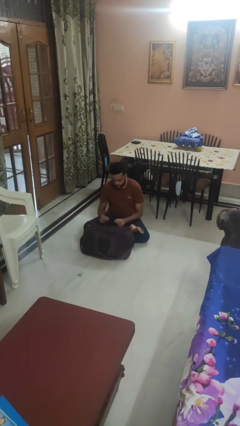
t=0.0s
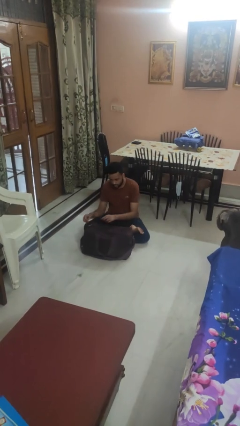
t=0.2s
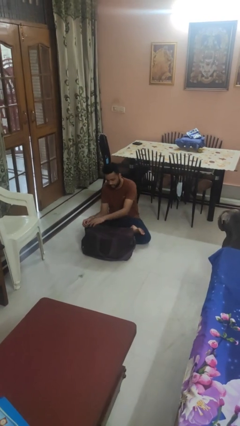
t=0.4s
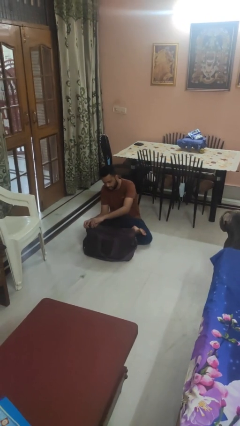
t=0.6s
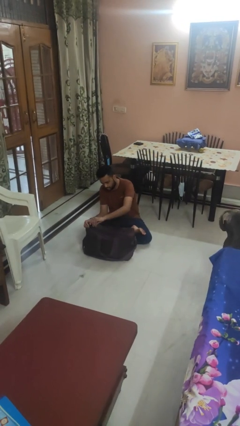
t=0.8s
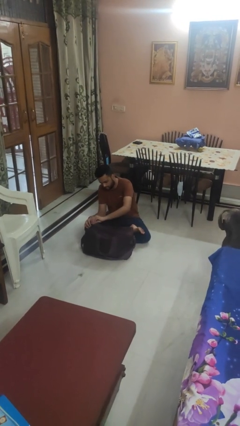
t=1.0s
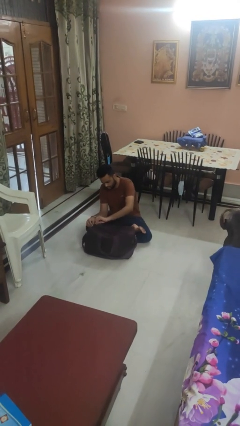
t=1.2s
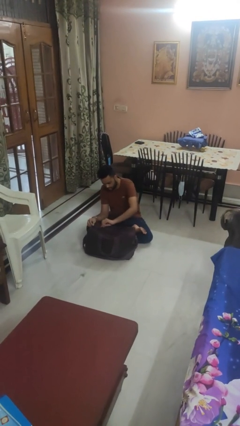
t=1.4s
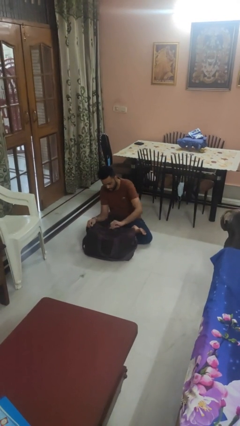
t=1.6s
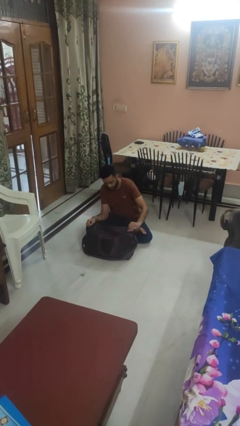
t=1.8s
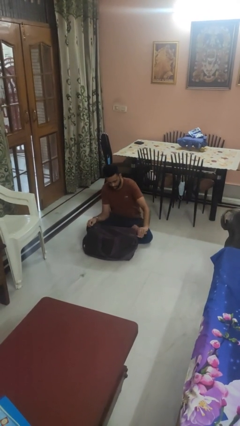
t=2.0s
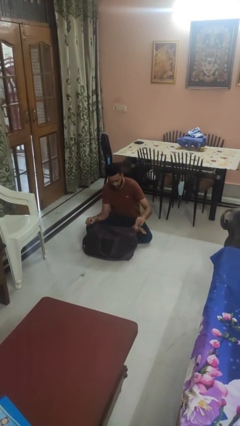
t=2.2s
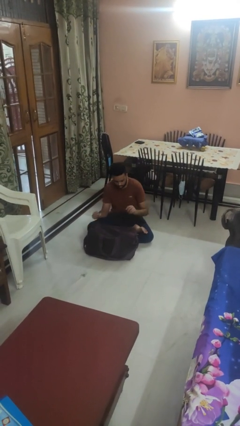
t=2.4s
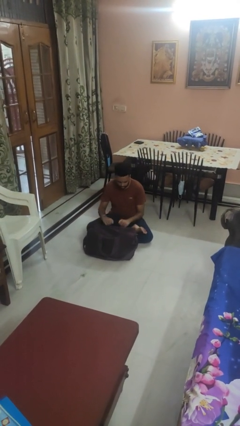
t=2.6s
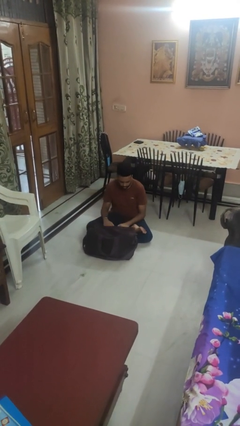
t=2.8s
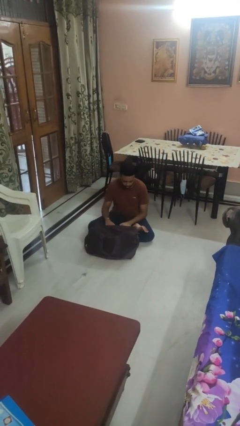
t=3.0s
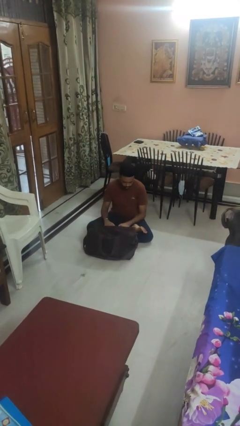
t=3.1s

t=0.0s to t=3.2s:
person closes suitcase

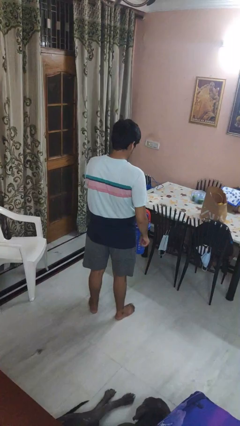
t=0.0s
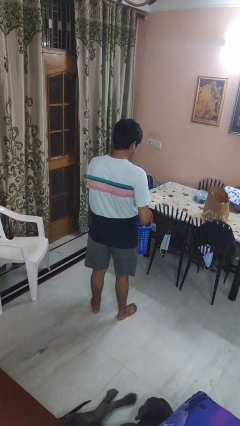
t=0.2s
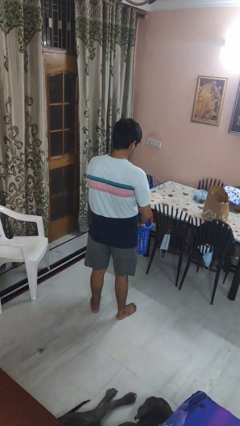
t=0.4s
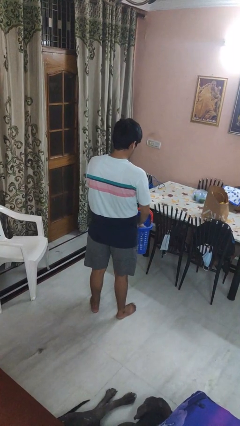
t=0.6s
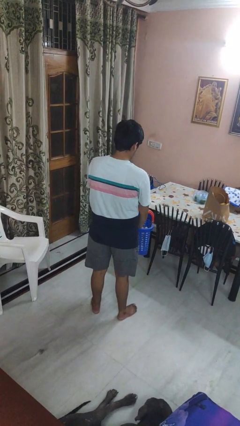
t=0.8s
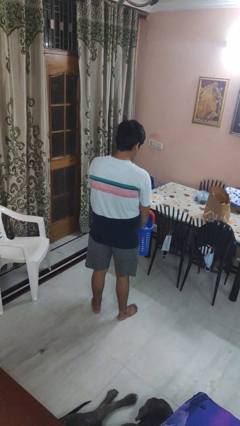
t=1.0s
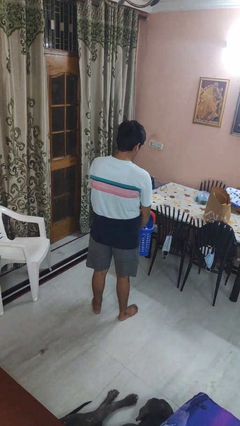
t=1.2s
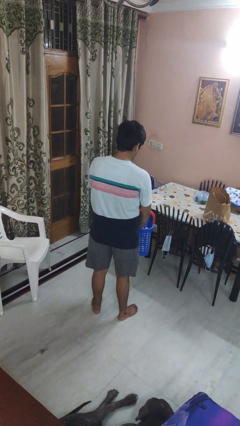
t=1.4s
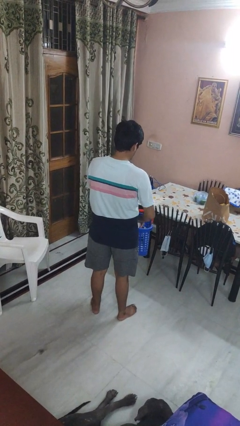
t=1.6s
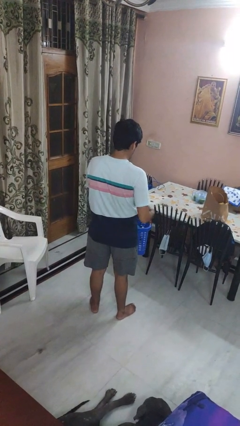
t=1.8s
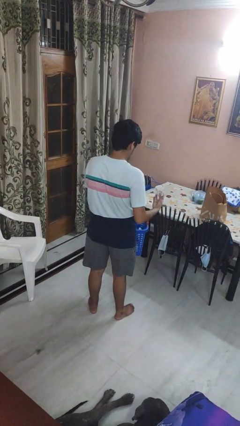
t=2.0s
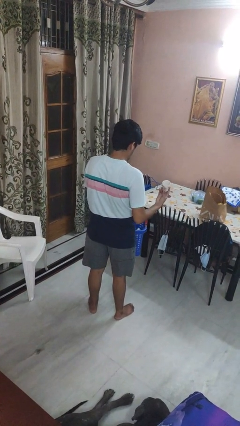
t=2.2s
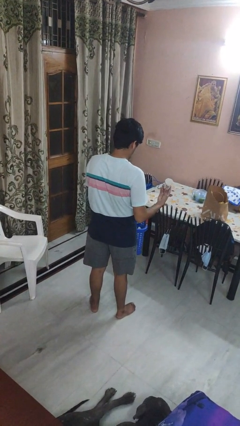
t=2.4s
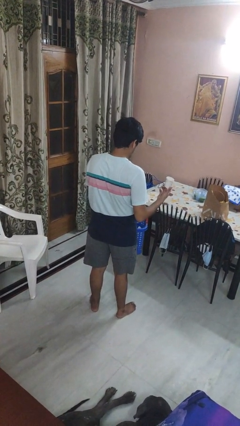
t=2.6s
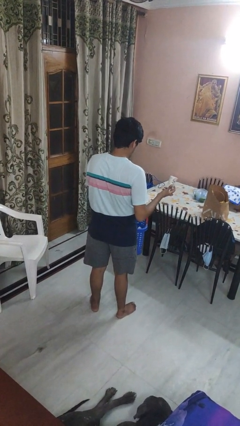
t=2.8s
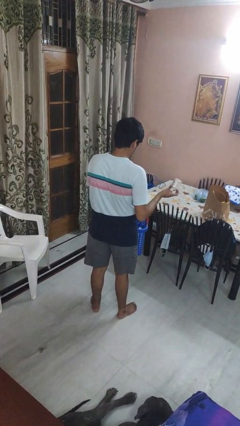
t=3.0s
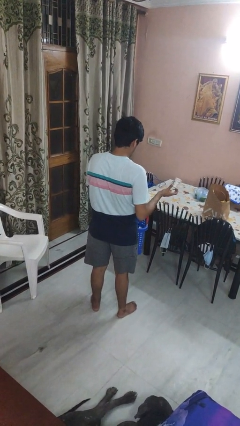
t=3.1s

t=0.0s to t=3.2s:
person takes object from basket

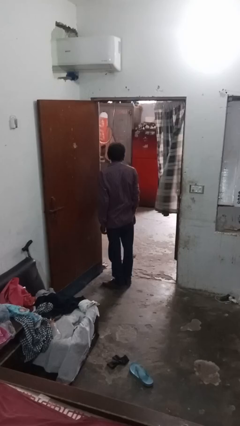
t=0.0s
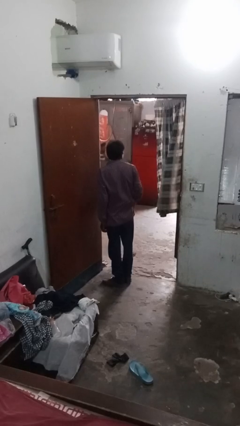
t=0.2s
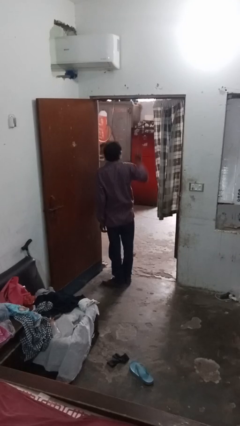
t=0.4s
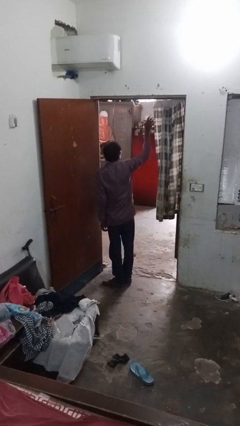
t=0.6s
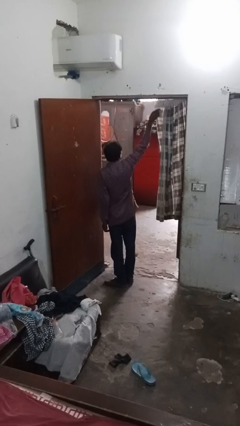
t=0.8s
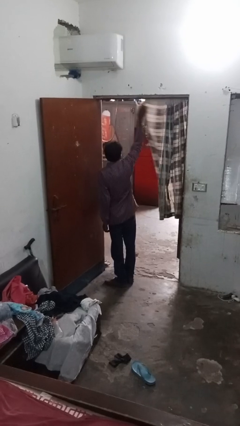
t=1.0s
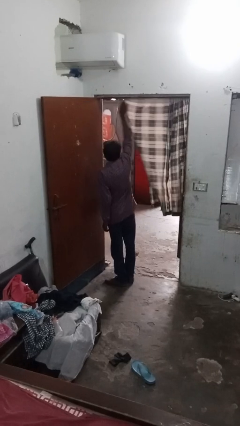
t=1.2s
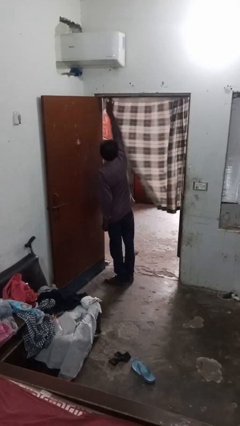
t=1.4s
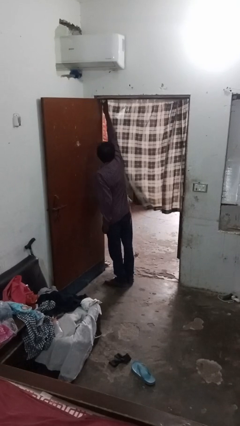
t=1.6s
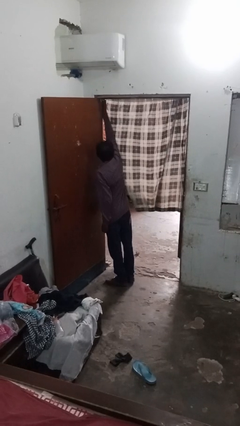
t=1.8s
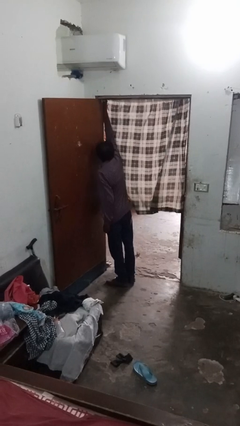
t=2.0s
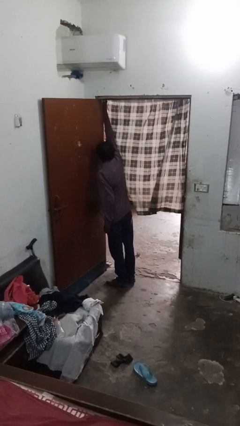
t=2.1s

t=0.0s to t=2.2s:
person closes curtains

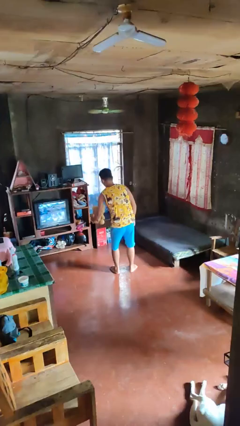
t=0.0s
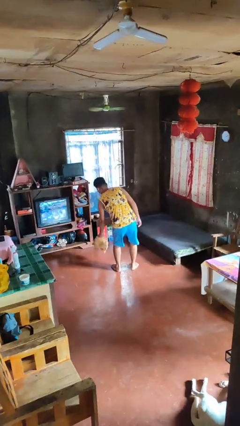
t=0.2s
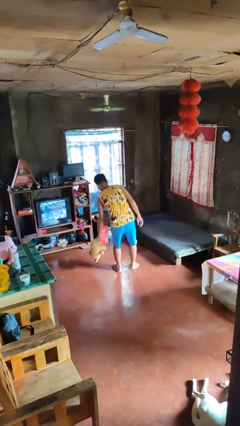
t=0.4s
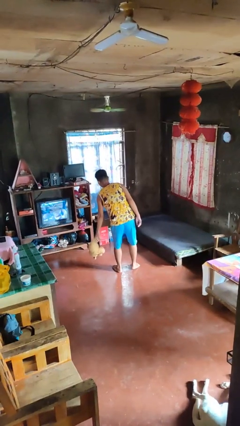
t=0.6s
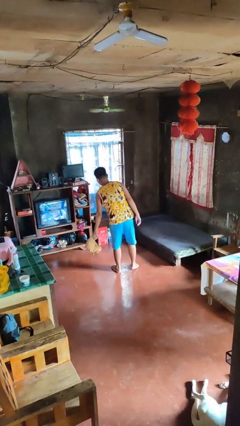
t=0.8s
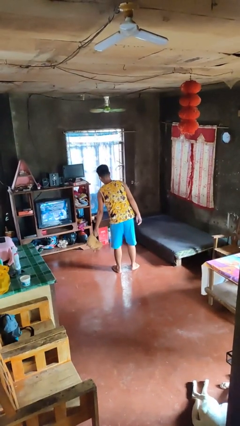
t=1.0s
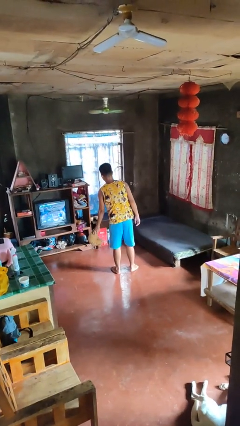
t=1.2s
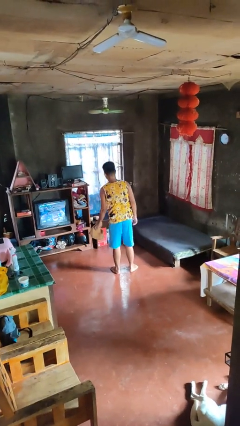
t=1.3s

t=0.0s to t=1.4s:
person catches dropped object

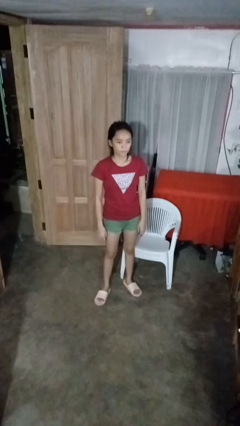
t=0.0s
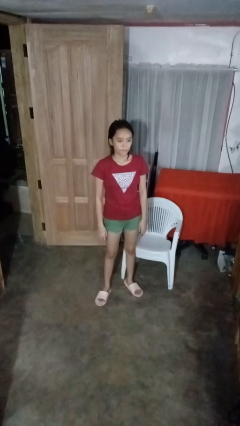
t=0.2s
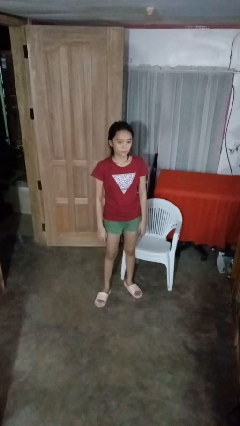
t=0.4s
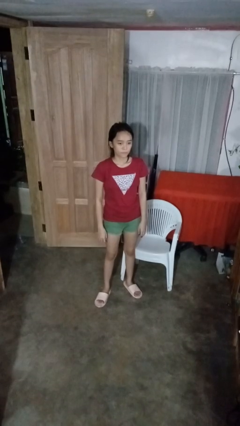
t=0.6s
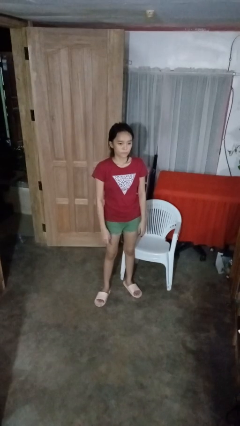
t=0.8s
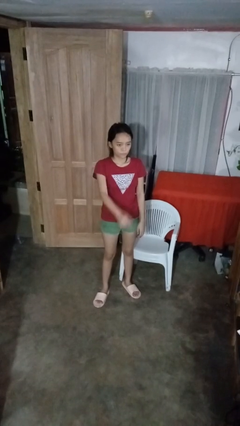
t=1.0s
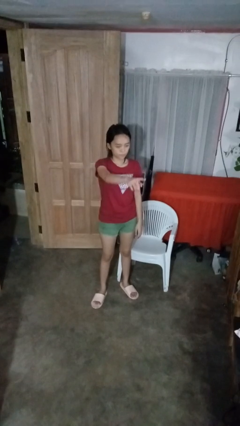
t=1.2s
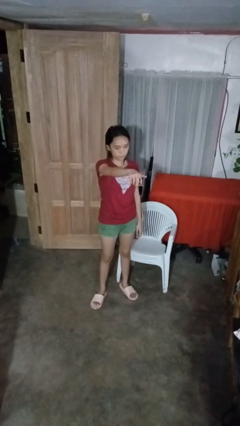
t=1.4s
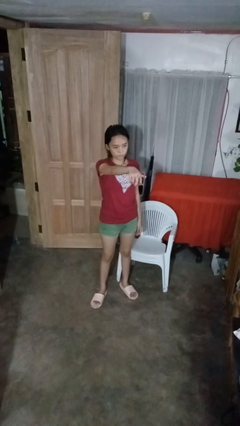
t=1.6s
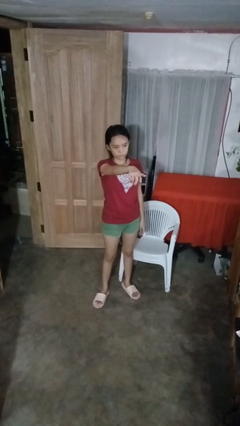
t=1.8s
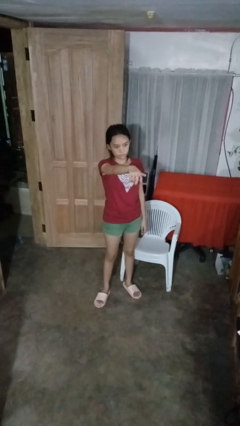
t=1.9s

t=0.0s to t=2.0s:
person points at person

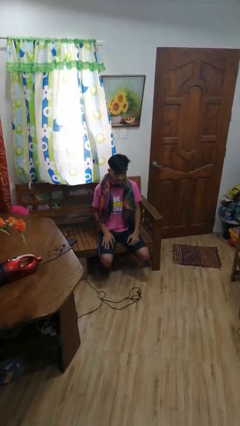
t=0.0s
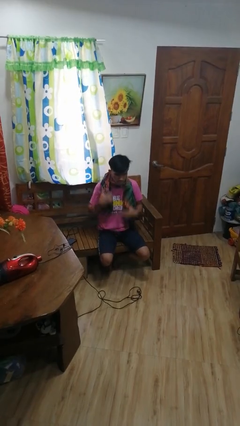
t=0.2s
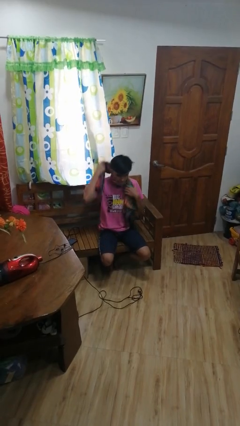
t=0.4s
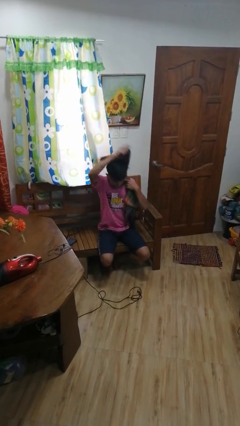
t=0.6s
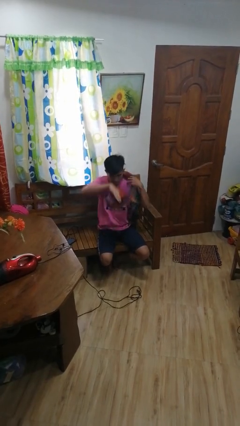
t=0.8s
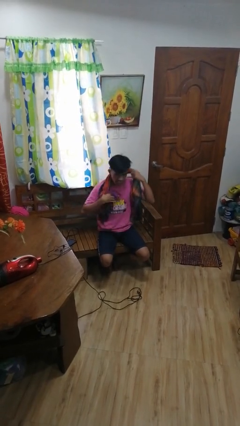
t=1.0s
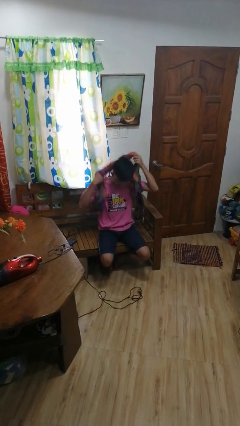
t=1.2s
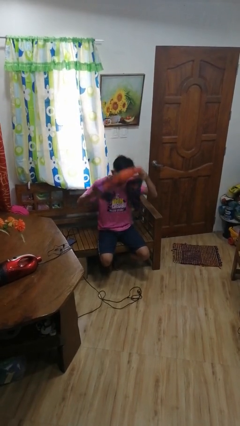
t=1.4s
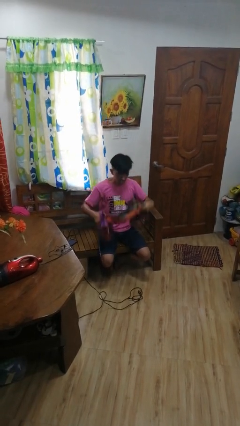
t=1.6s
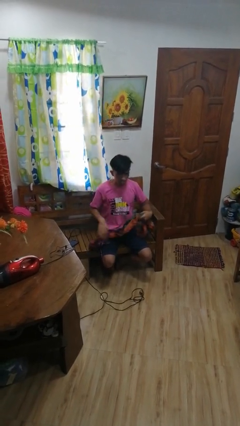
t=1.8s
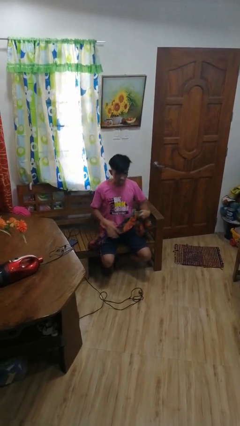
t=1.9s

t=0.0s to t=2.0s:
person takes off scarf

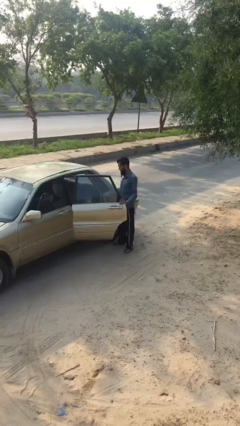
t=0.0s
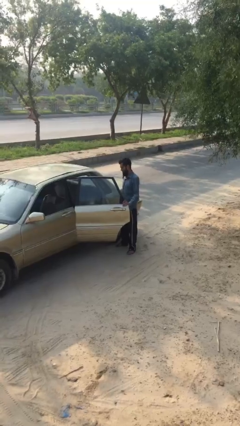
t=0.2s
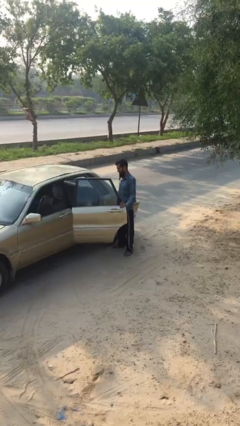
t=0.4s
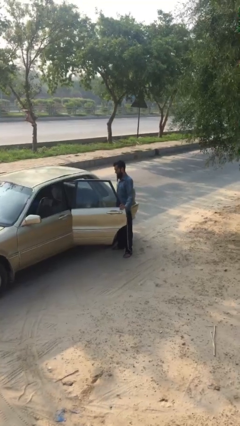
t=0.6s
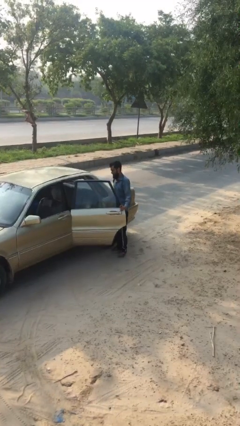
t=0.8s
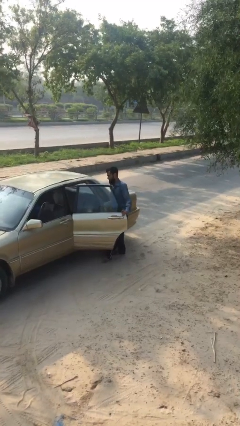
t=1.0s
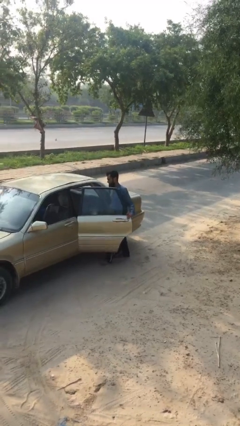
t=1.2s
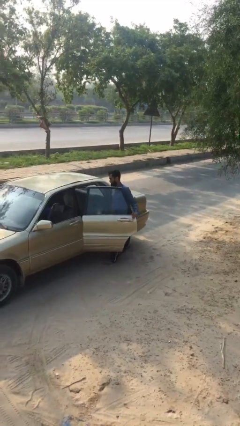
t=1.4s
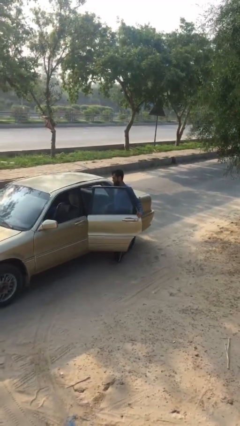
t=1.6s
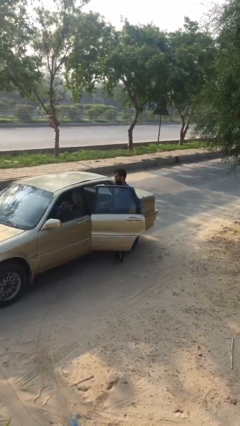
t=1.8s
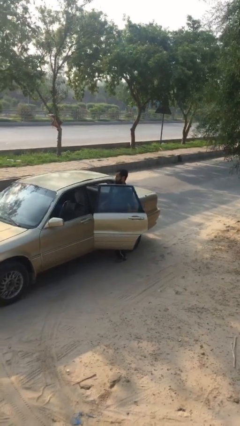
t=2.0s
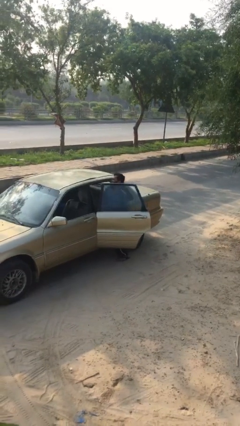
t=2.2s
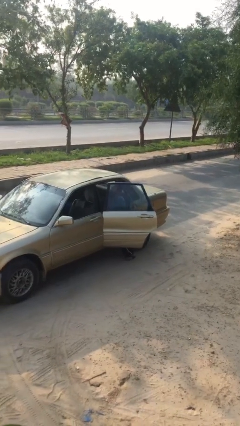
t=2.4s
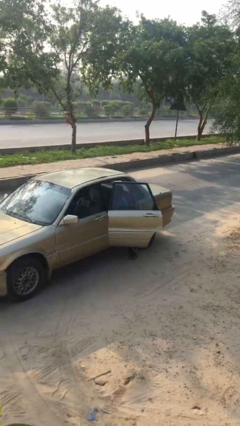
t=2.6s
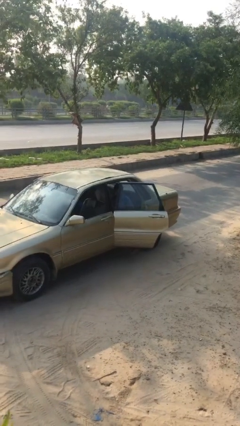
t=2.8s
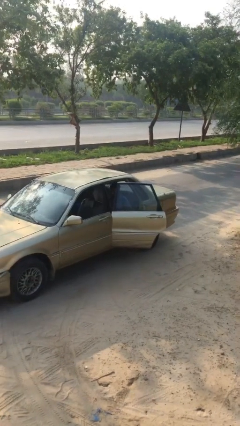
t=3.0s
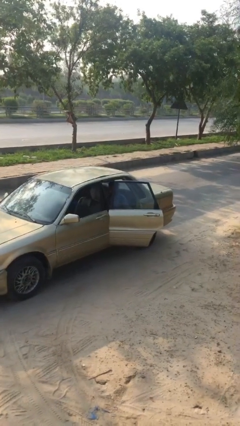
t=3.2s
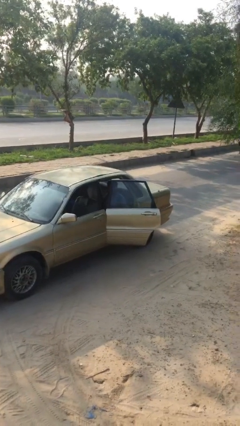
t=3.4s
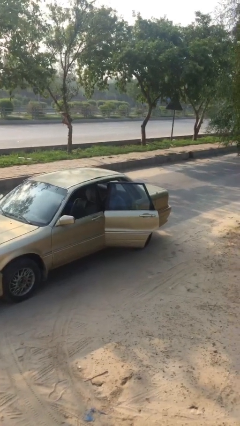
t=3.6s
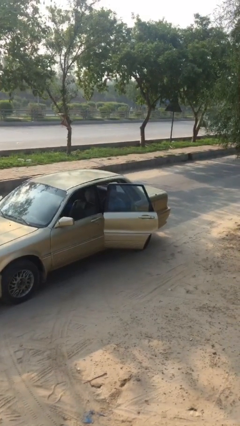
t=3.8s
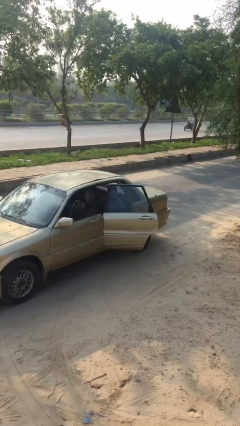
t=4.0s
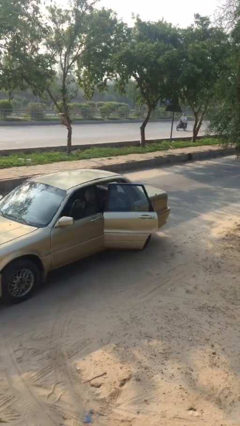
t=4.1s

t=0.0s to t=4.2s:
person enters car
